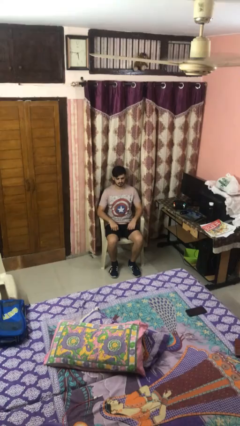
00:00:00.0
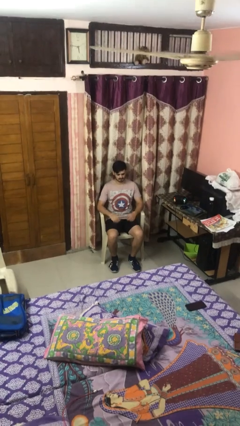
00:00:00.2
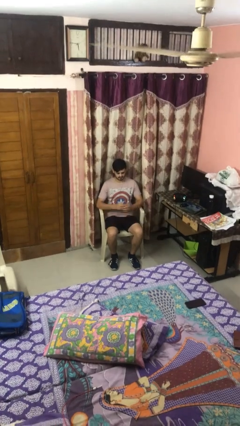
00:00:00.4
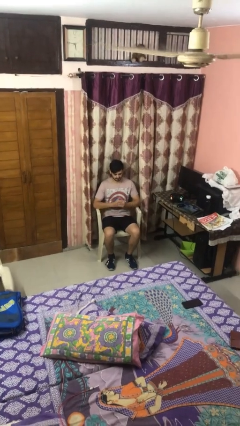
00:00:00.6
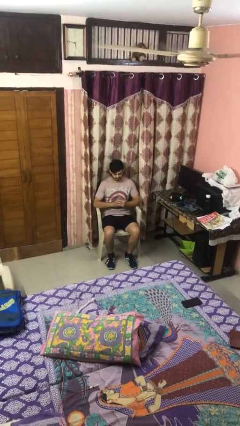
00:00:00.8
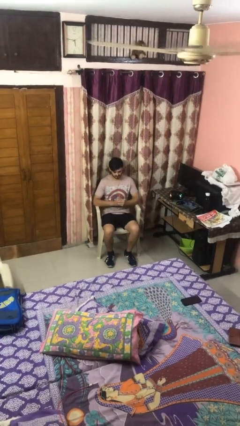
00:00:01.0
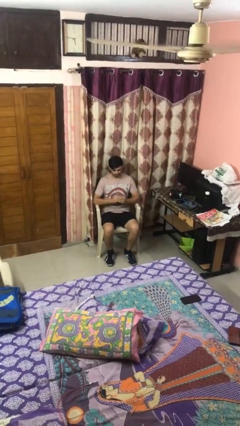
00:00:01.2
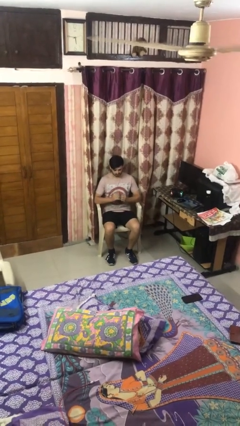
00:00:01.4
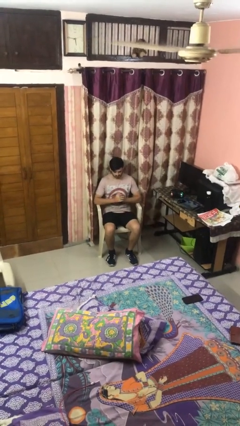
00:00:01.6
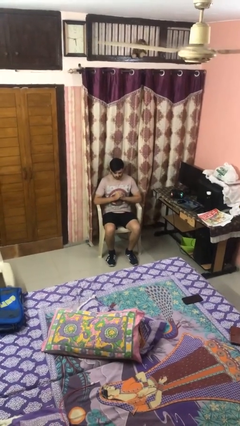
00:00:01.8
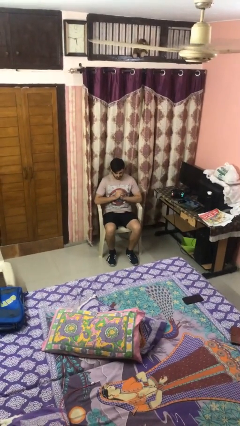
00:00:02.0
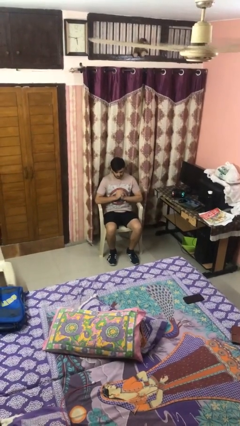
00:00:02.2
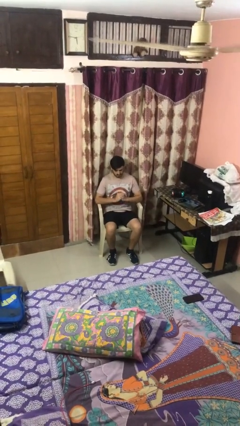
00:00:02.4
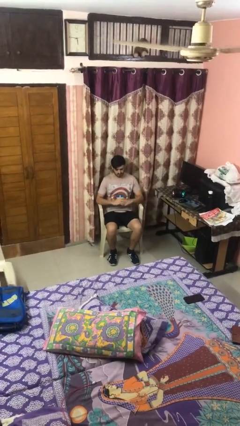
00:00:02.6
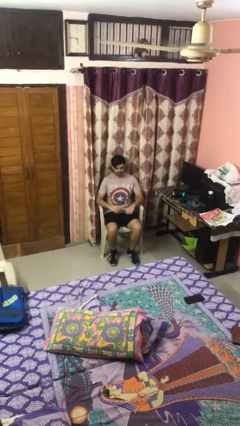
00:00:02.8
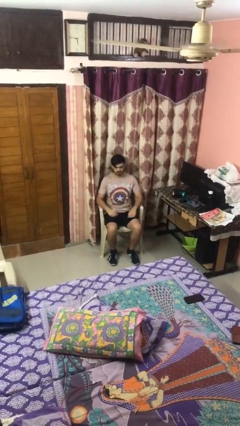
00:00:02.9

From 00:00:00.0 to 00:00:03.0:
person cracks knuckles

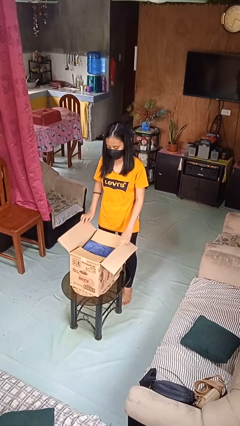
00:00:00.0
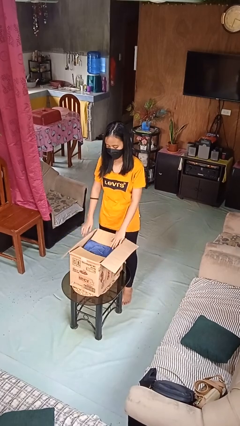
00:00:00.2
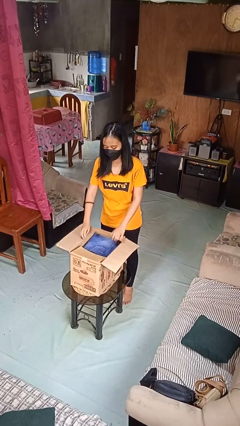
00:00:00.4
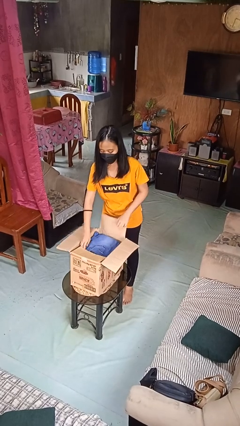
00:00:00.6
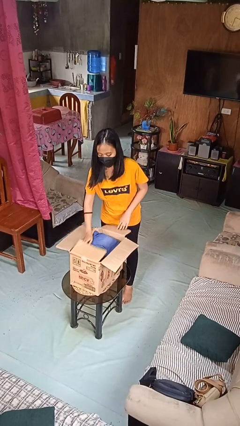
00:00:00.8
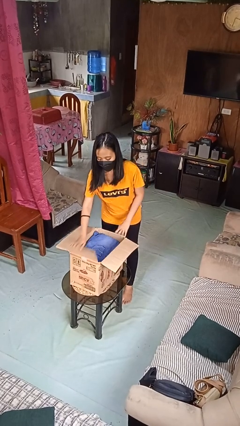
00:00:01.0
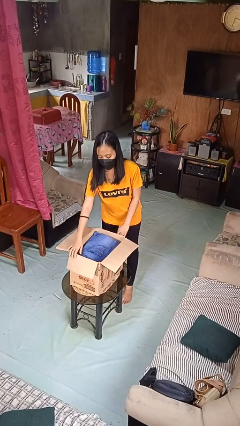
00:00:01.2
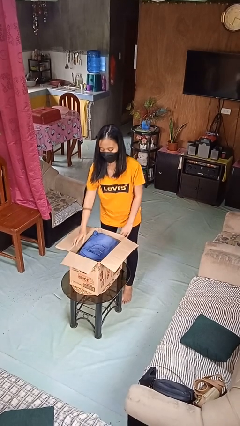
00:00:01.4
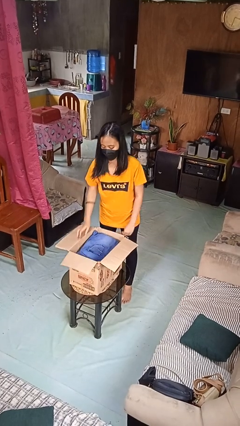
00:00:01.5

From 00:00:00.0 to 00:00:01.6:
person opens box

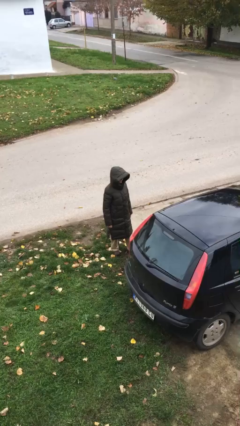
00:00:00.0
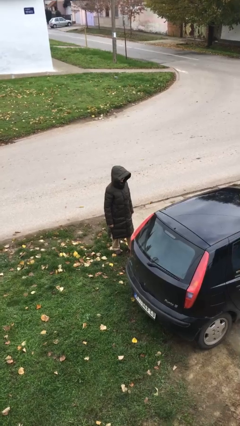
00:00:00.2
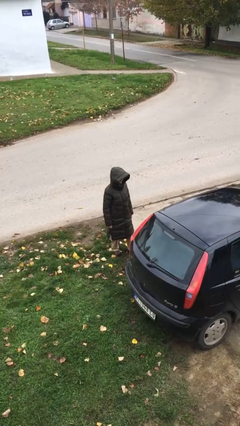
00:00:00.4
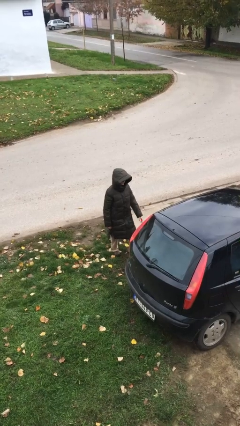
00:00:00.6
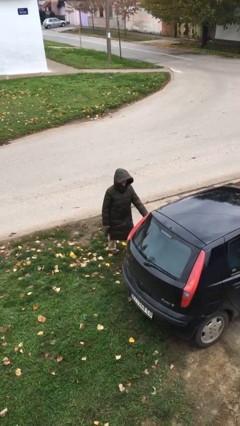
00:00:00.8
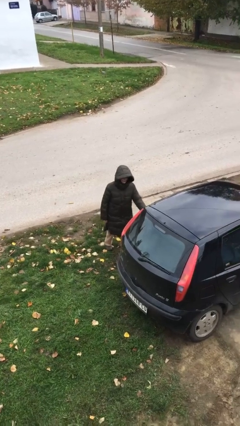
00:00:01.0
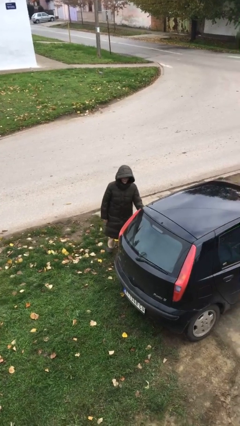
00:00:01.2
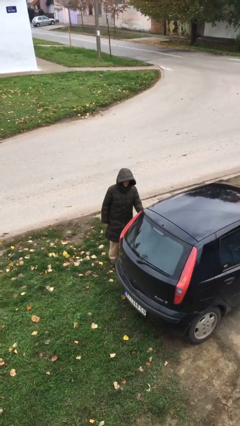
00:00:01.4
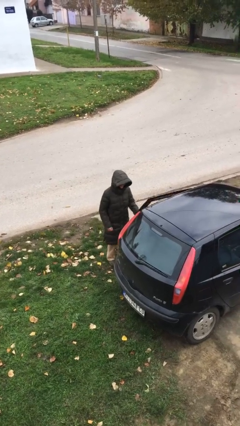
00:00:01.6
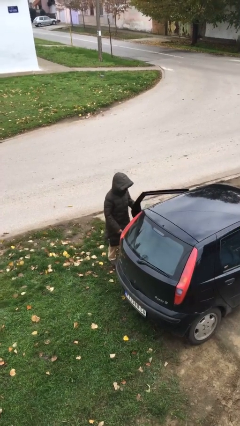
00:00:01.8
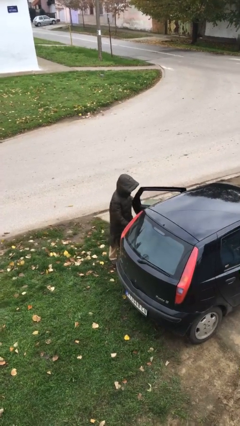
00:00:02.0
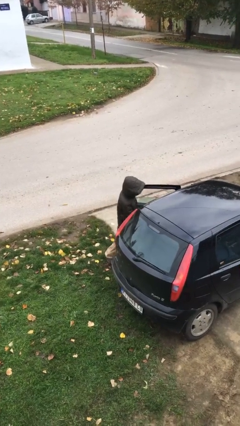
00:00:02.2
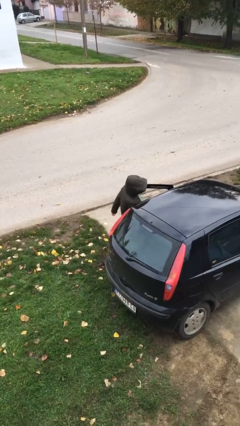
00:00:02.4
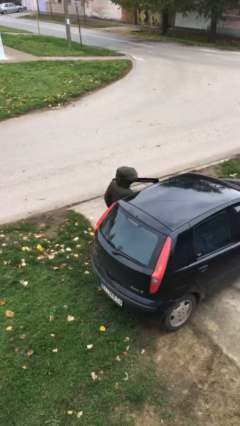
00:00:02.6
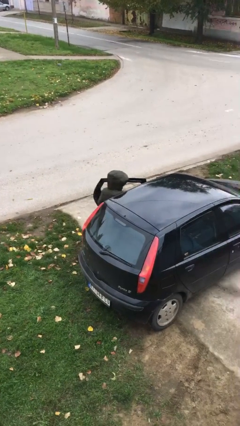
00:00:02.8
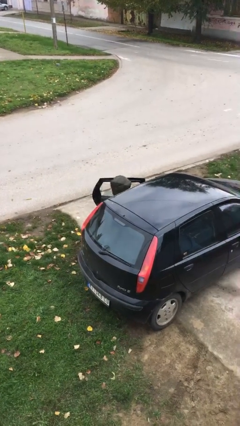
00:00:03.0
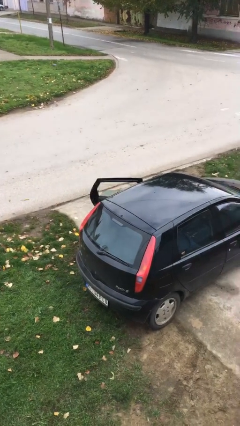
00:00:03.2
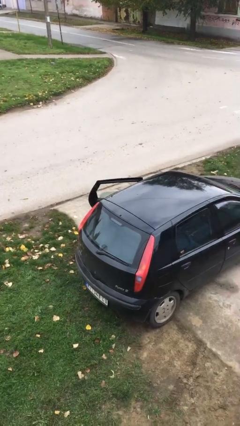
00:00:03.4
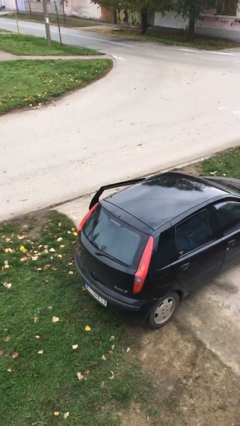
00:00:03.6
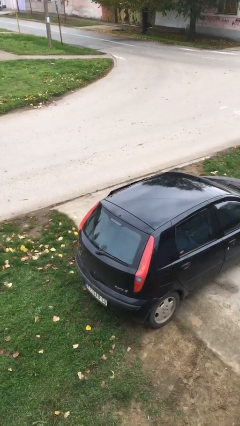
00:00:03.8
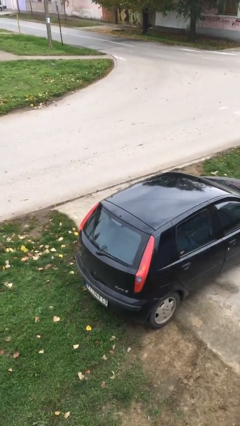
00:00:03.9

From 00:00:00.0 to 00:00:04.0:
person enters car

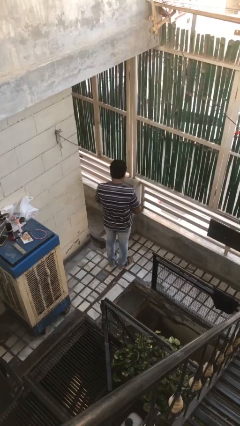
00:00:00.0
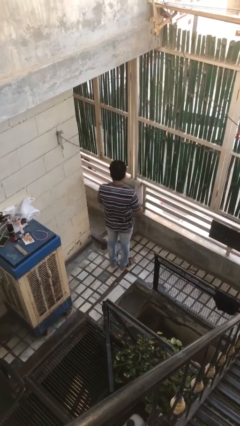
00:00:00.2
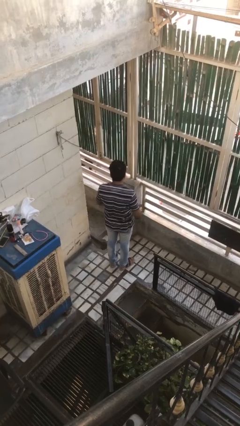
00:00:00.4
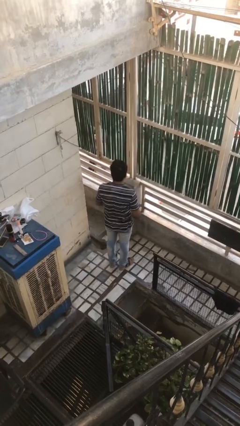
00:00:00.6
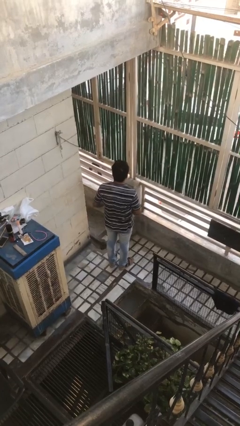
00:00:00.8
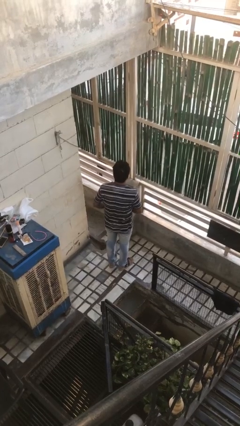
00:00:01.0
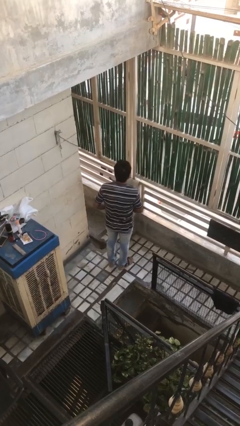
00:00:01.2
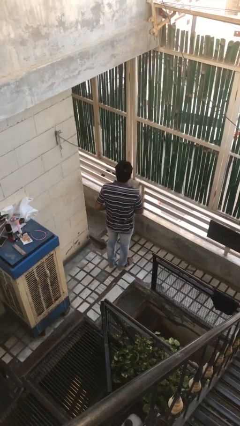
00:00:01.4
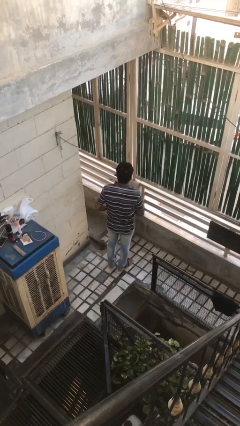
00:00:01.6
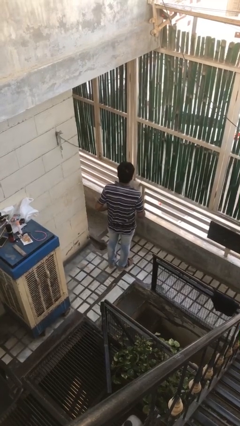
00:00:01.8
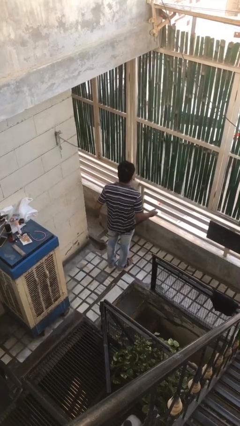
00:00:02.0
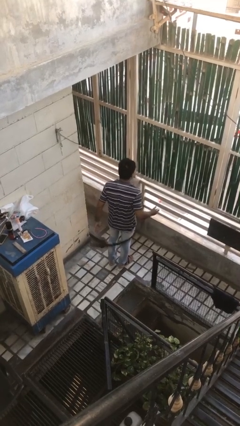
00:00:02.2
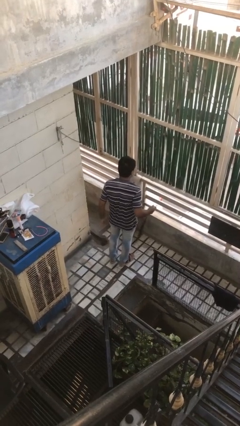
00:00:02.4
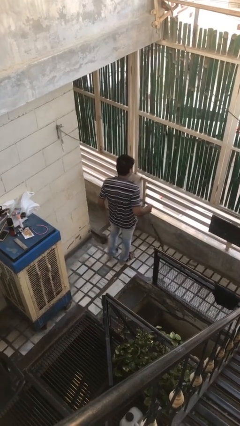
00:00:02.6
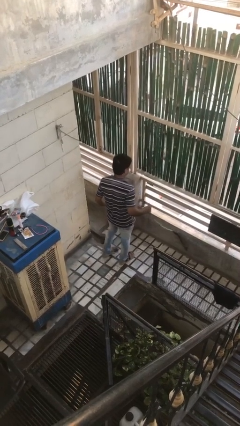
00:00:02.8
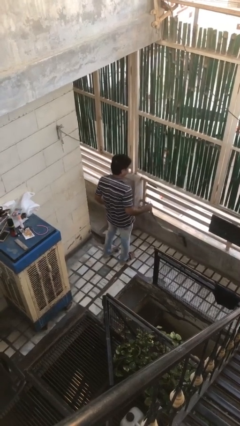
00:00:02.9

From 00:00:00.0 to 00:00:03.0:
person takes off belt

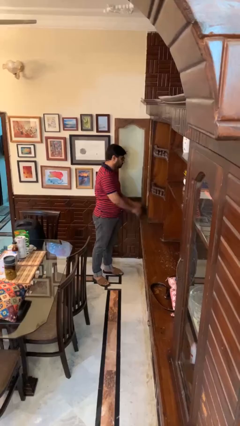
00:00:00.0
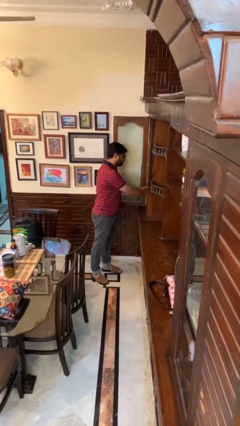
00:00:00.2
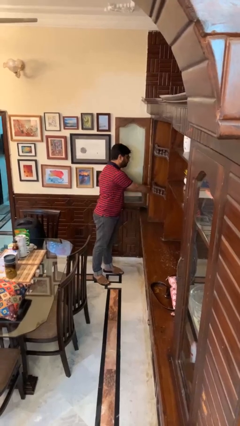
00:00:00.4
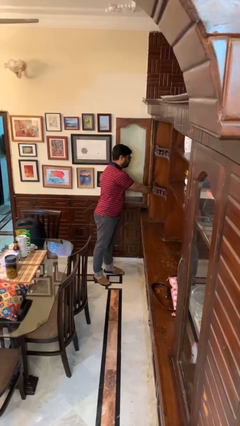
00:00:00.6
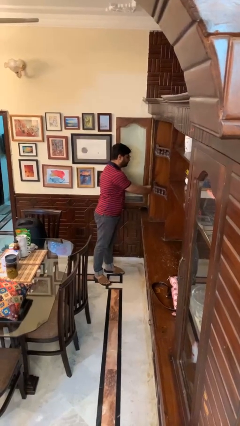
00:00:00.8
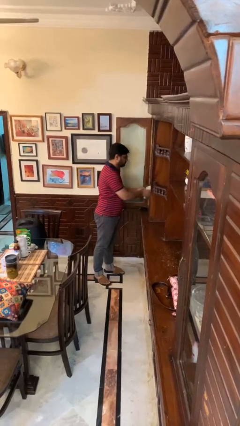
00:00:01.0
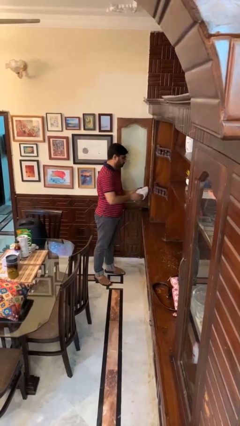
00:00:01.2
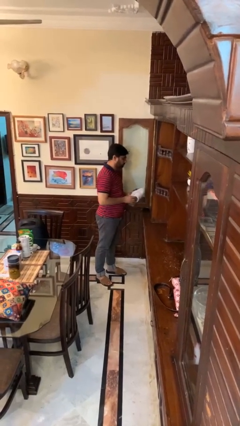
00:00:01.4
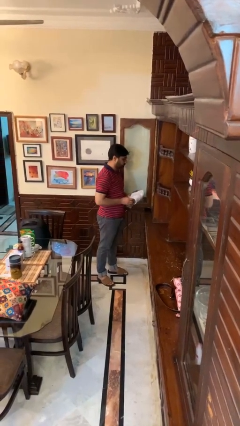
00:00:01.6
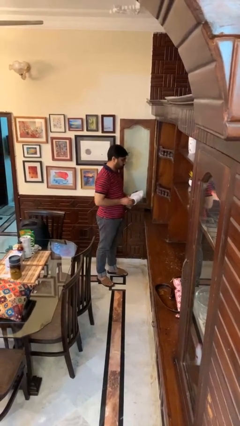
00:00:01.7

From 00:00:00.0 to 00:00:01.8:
person takes clothes from dresser

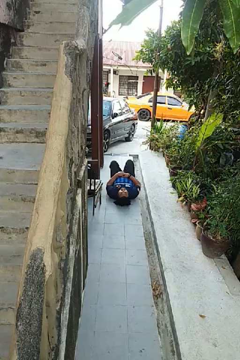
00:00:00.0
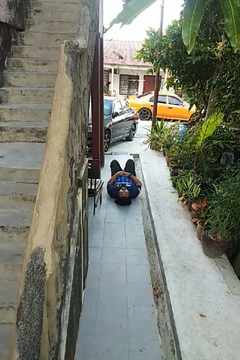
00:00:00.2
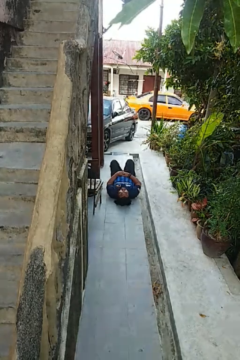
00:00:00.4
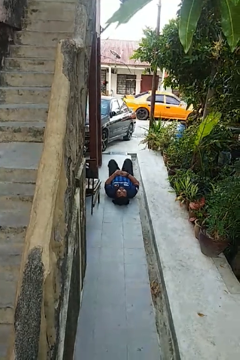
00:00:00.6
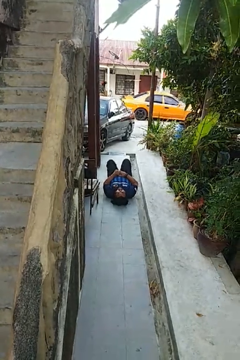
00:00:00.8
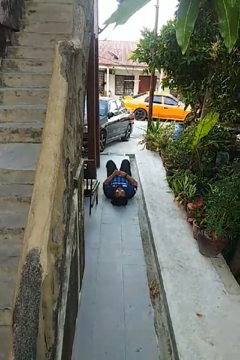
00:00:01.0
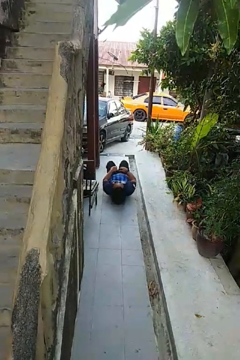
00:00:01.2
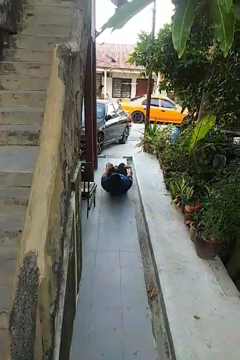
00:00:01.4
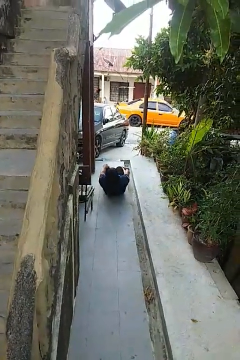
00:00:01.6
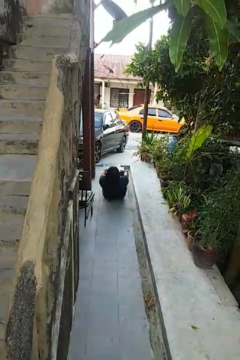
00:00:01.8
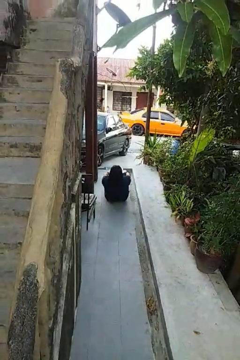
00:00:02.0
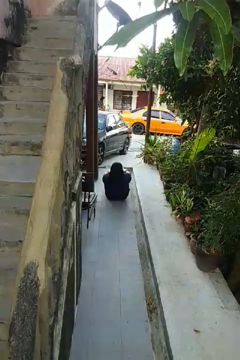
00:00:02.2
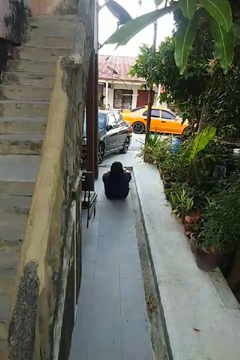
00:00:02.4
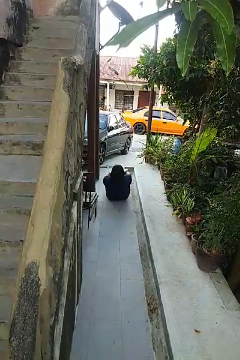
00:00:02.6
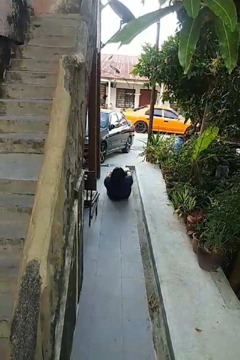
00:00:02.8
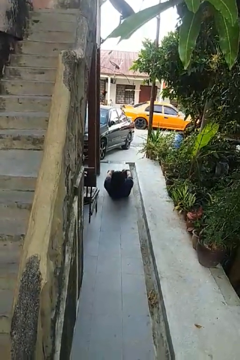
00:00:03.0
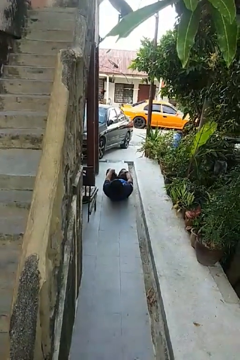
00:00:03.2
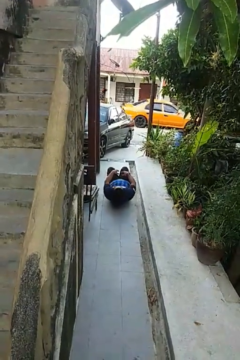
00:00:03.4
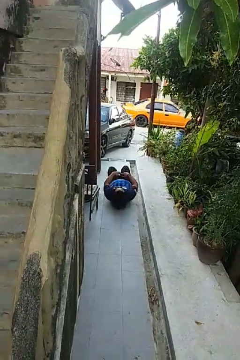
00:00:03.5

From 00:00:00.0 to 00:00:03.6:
person exercises with situp

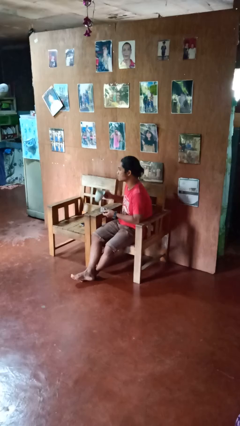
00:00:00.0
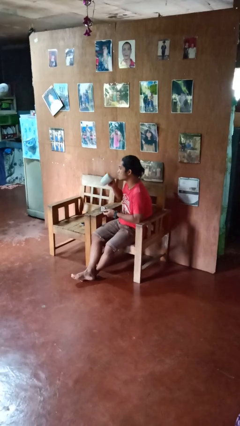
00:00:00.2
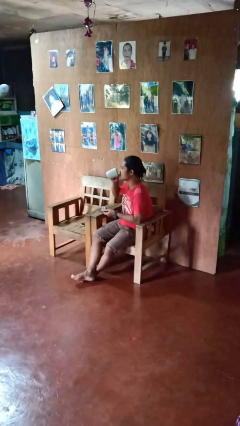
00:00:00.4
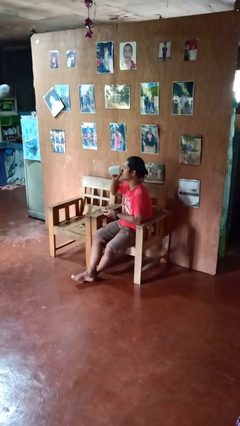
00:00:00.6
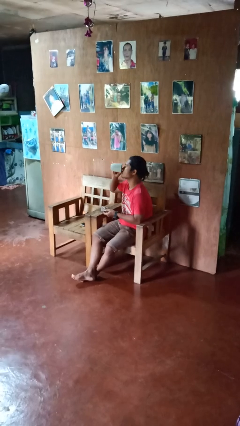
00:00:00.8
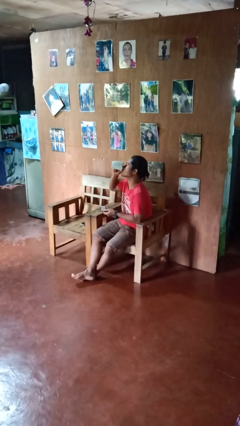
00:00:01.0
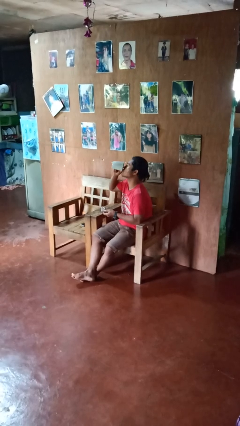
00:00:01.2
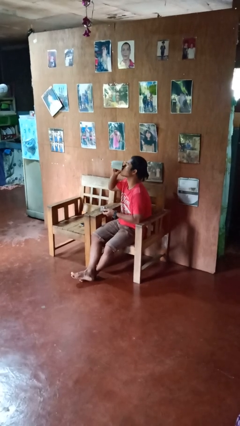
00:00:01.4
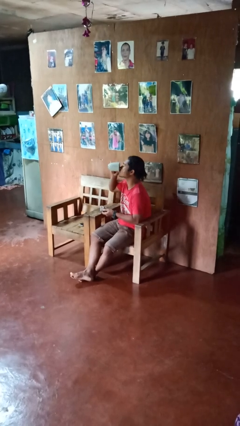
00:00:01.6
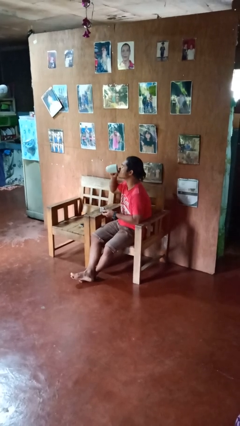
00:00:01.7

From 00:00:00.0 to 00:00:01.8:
person drinks from cup
